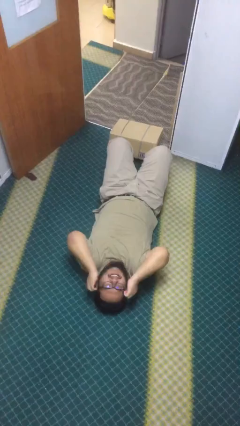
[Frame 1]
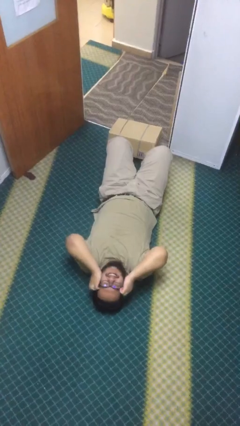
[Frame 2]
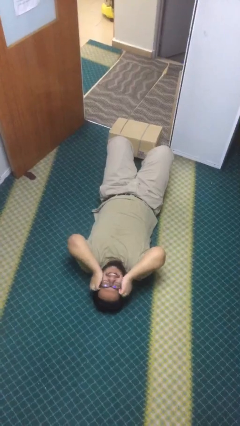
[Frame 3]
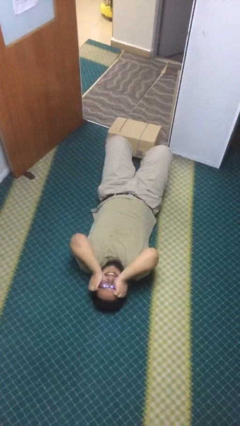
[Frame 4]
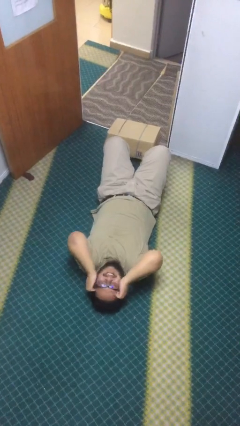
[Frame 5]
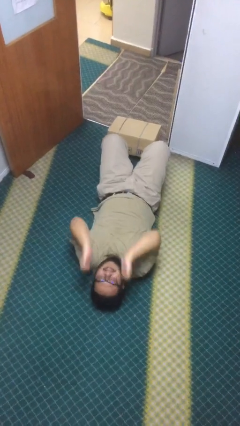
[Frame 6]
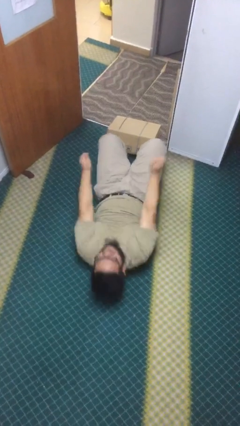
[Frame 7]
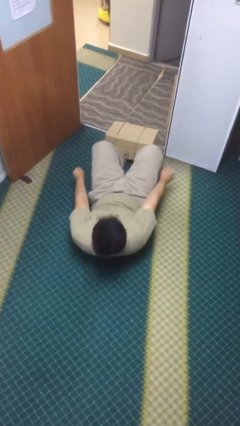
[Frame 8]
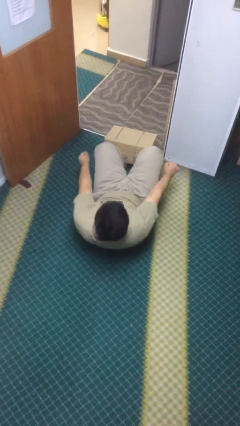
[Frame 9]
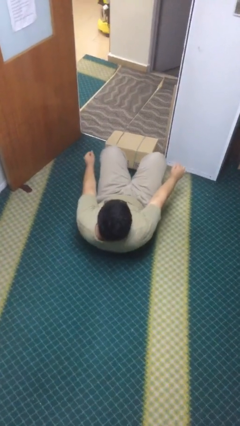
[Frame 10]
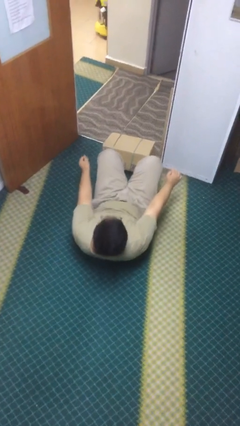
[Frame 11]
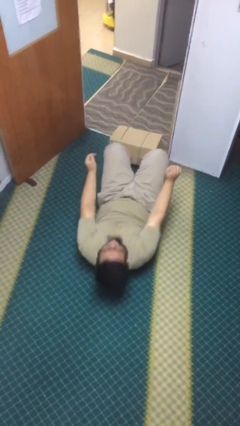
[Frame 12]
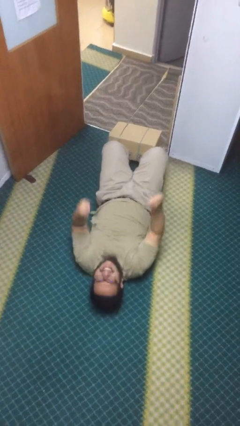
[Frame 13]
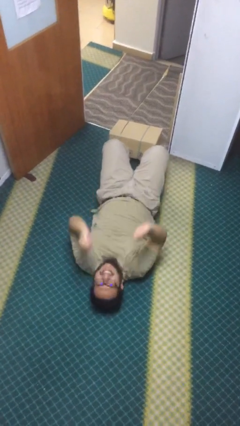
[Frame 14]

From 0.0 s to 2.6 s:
person exercises with situp

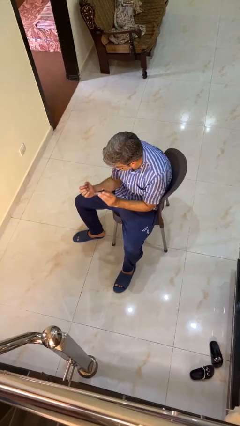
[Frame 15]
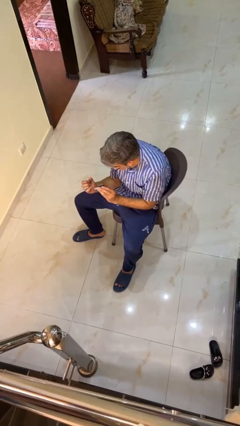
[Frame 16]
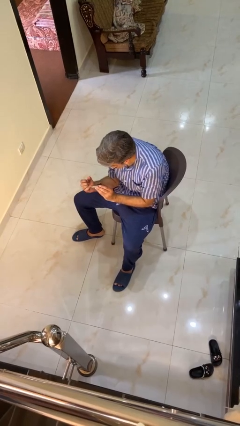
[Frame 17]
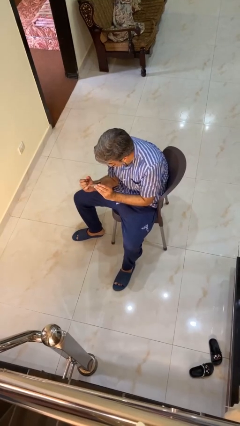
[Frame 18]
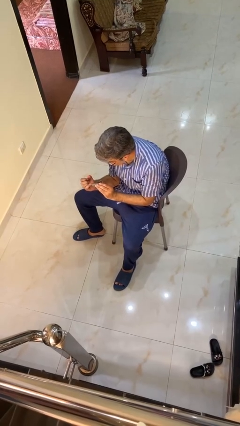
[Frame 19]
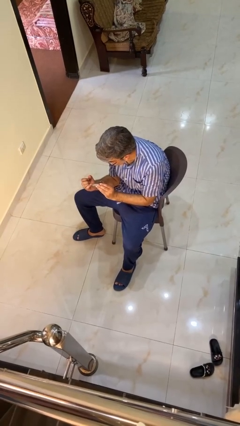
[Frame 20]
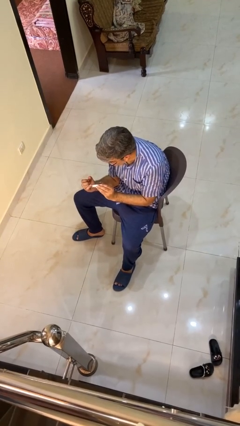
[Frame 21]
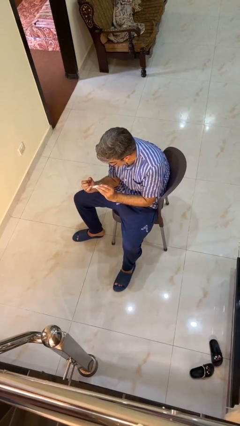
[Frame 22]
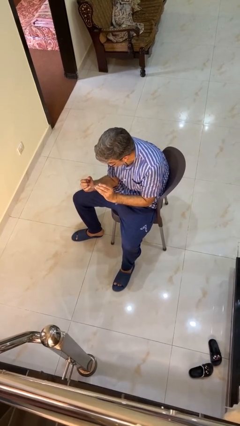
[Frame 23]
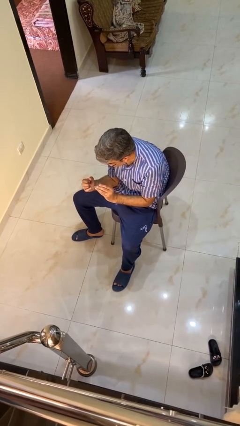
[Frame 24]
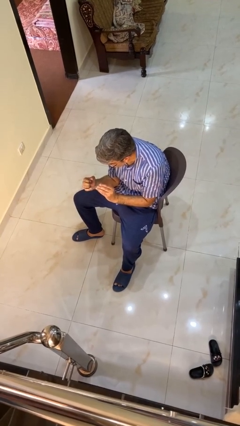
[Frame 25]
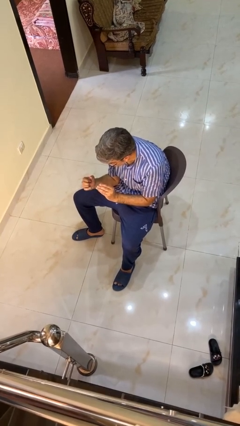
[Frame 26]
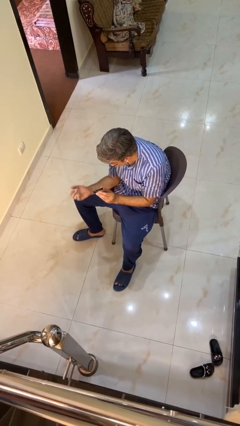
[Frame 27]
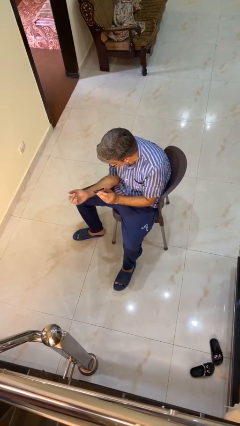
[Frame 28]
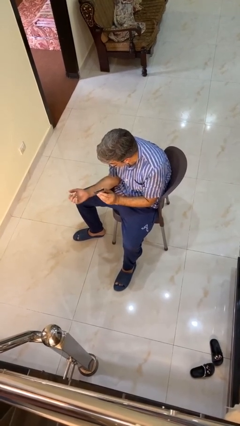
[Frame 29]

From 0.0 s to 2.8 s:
person clips fingernails

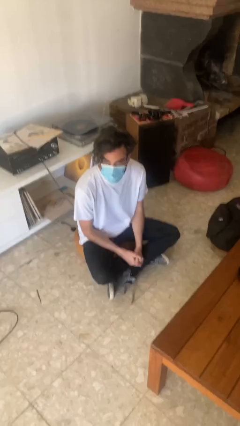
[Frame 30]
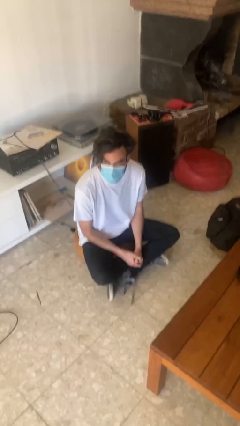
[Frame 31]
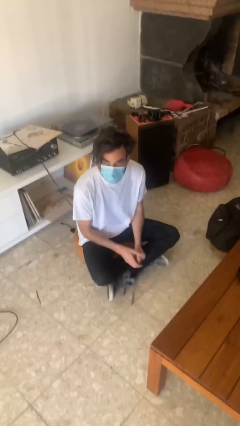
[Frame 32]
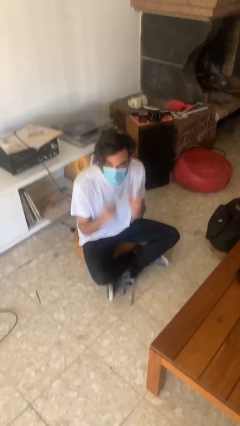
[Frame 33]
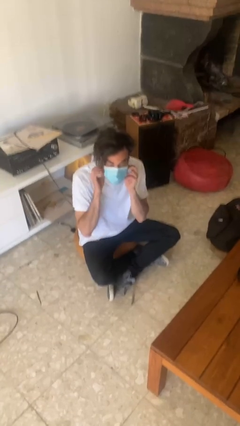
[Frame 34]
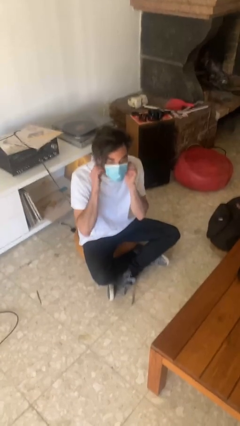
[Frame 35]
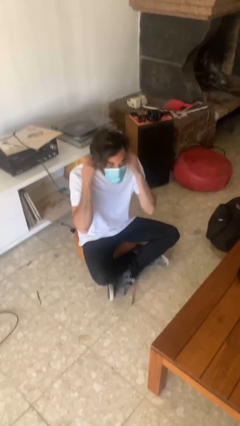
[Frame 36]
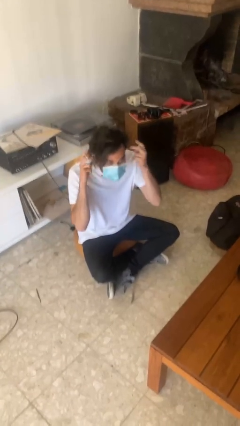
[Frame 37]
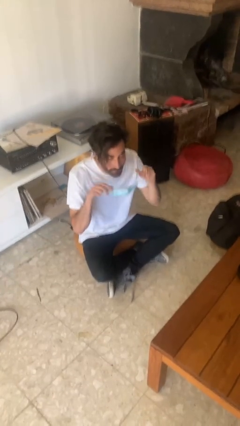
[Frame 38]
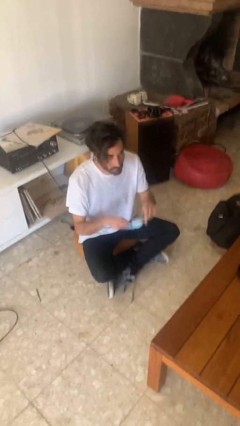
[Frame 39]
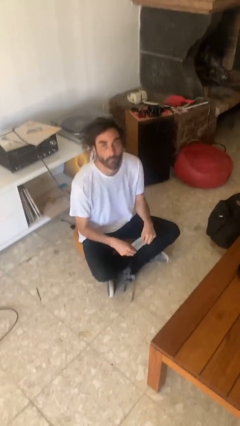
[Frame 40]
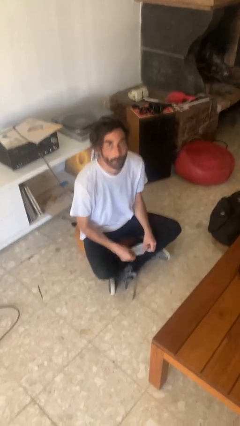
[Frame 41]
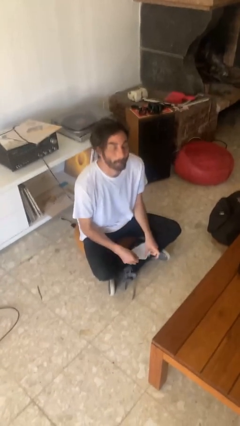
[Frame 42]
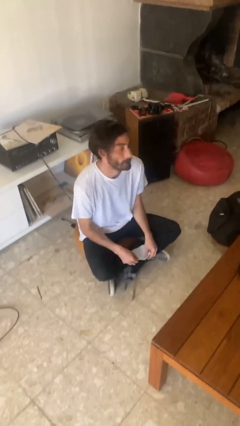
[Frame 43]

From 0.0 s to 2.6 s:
person takes off facemask

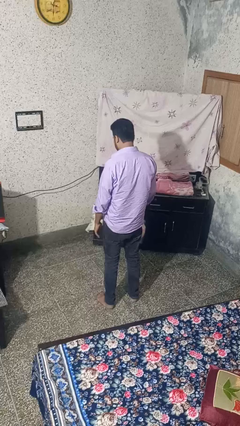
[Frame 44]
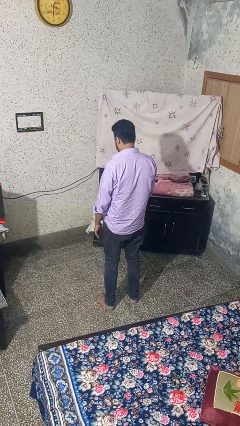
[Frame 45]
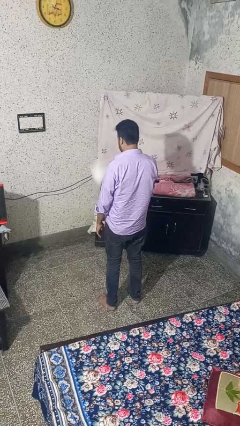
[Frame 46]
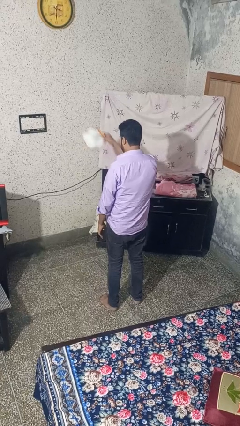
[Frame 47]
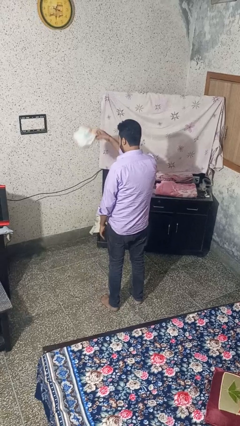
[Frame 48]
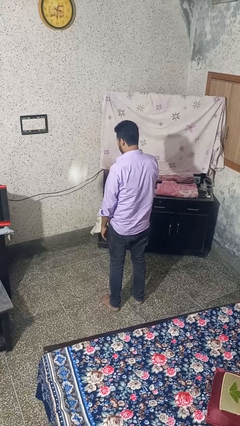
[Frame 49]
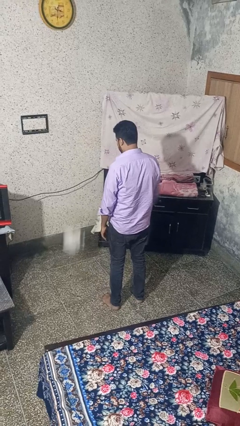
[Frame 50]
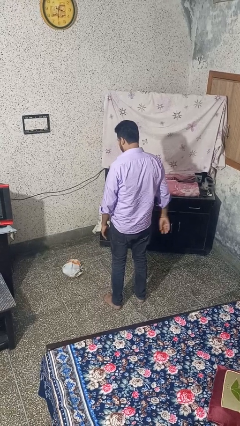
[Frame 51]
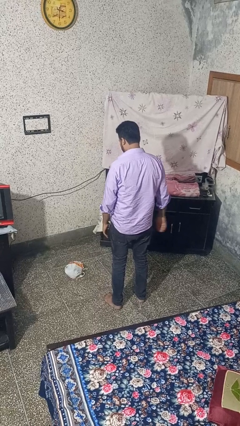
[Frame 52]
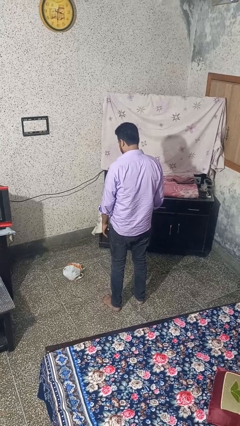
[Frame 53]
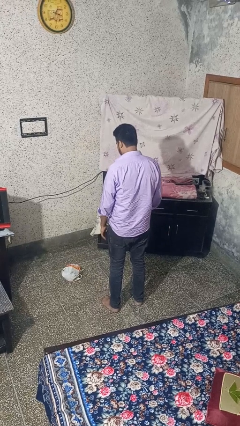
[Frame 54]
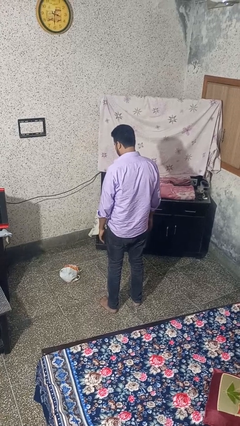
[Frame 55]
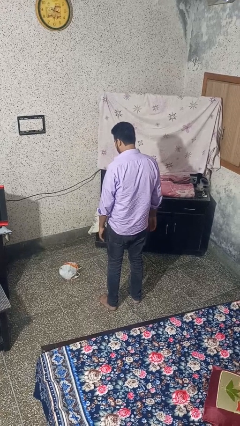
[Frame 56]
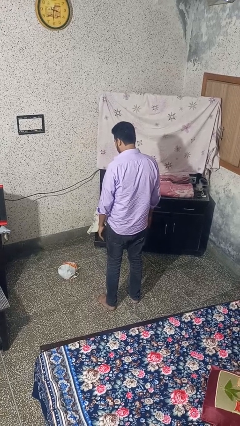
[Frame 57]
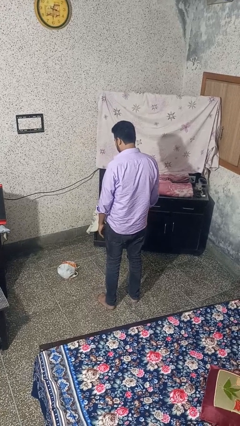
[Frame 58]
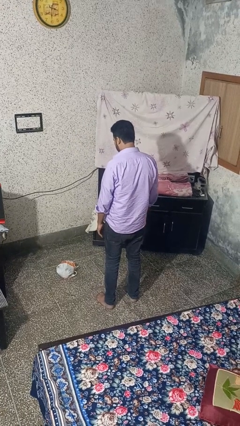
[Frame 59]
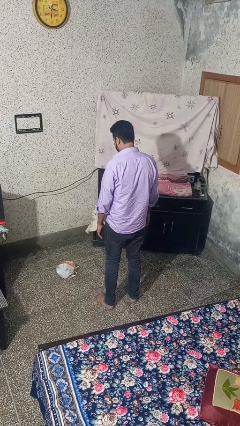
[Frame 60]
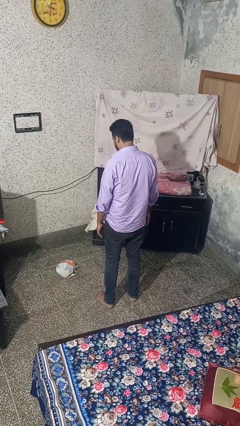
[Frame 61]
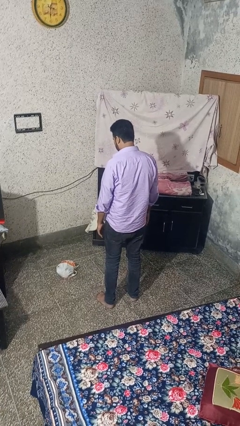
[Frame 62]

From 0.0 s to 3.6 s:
person throws object to ground

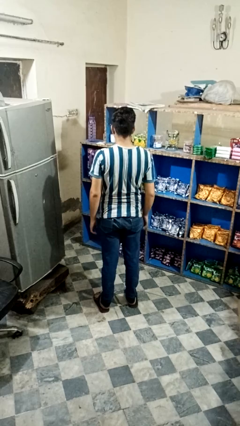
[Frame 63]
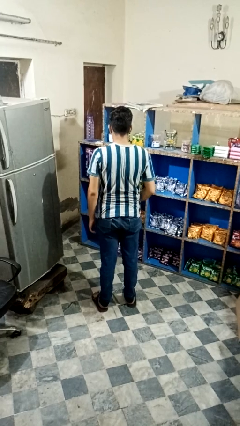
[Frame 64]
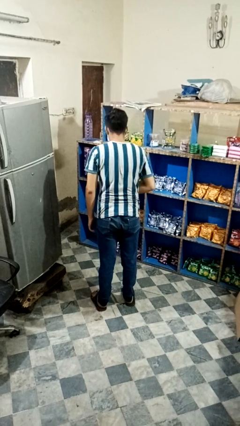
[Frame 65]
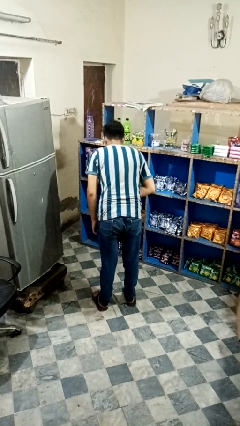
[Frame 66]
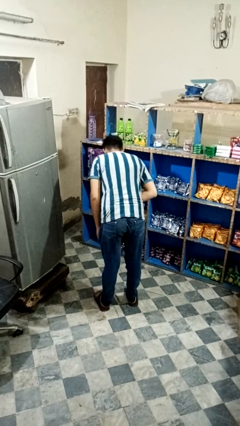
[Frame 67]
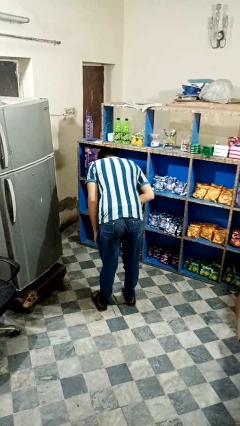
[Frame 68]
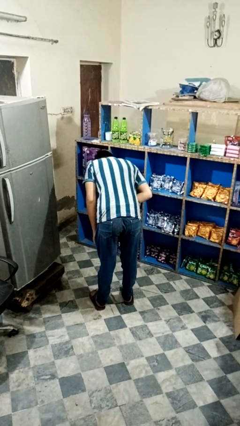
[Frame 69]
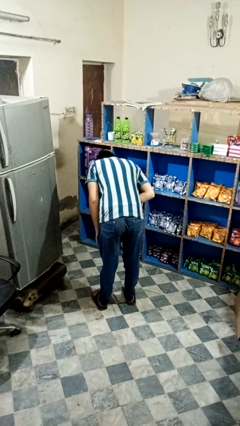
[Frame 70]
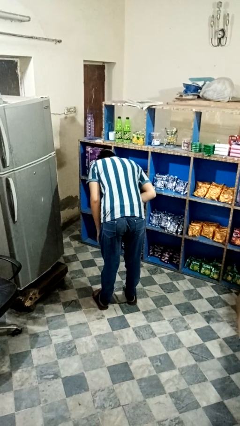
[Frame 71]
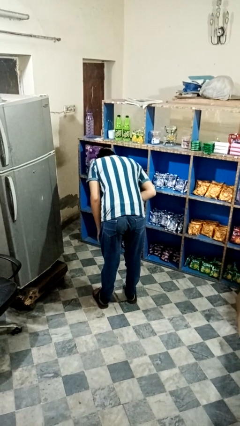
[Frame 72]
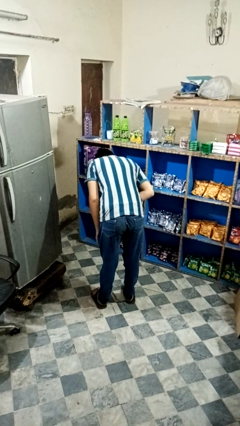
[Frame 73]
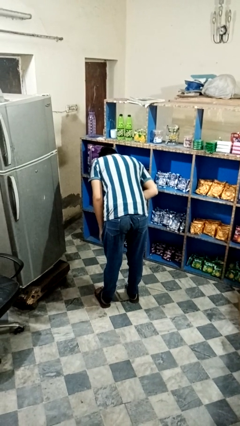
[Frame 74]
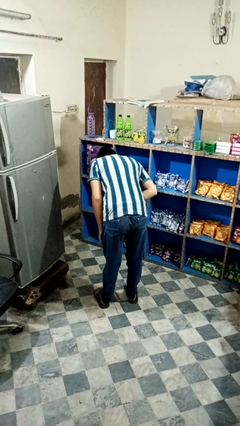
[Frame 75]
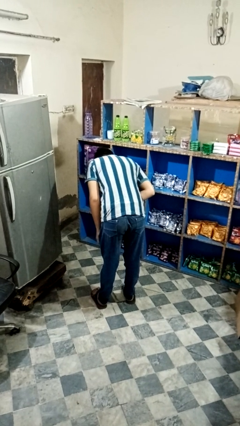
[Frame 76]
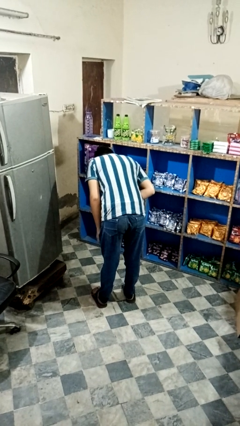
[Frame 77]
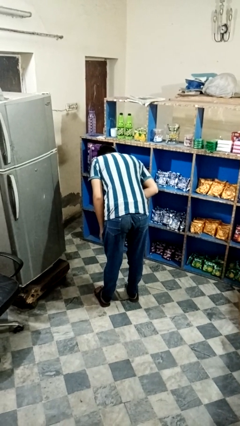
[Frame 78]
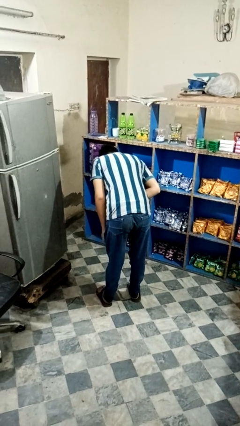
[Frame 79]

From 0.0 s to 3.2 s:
person bows

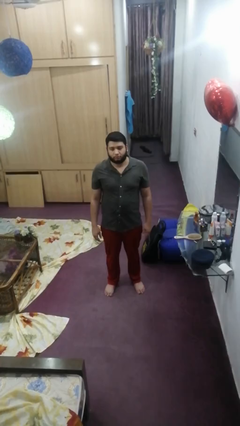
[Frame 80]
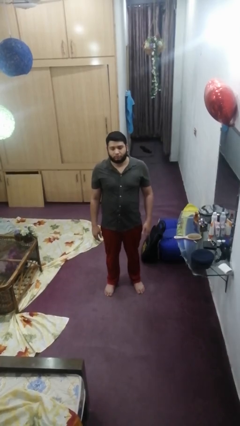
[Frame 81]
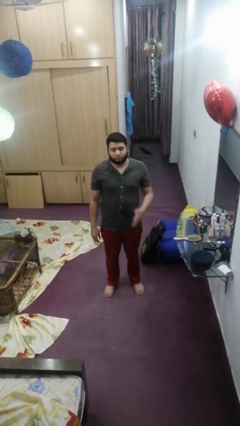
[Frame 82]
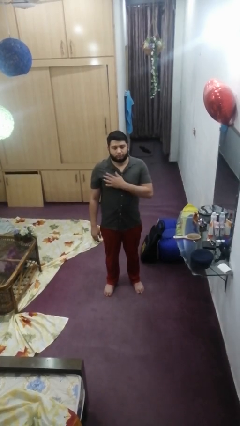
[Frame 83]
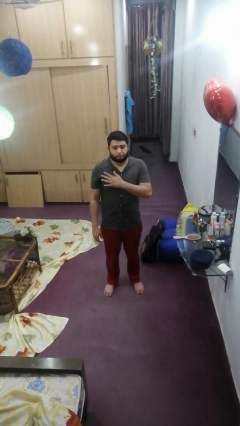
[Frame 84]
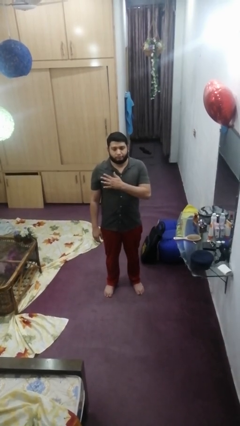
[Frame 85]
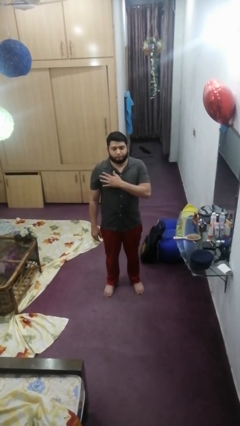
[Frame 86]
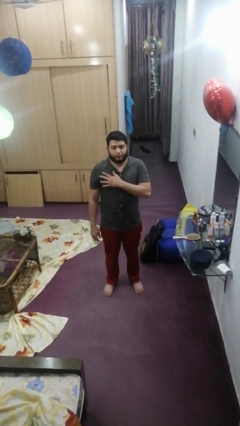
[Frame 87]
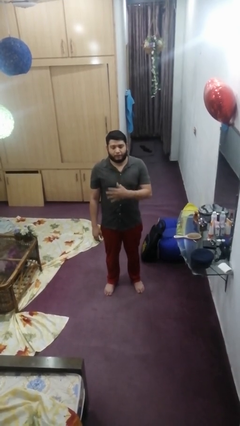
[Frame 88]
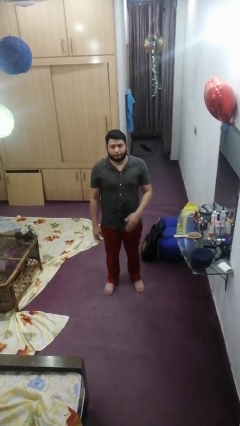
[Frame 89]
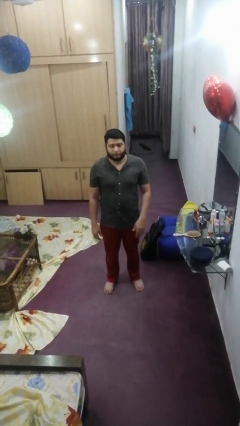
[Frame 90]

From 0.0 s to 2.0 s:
person drums on chest

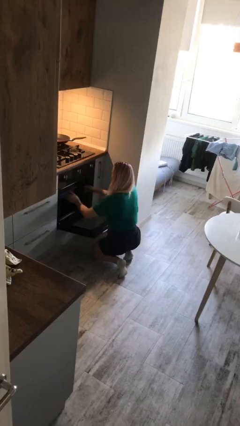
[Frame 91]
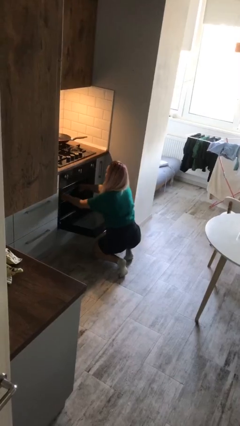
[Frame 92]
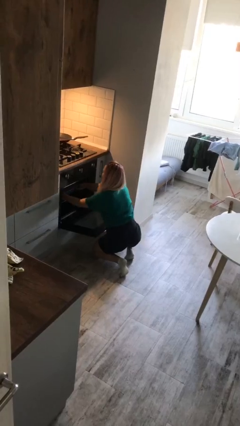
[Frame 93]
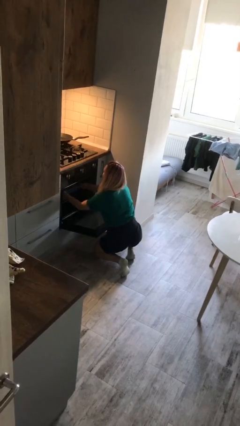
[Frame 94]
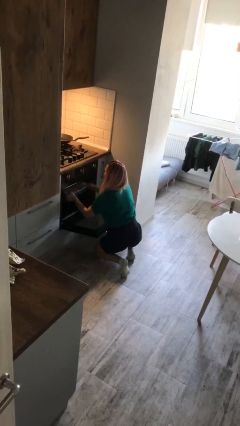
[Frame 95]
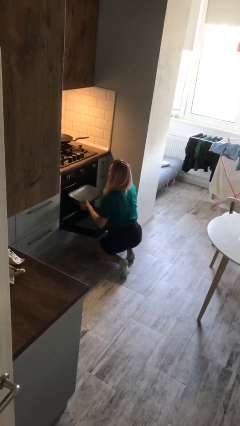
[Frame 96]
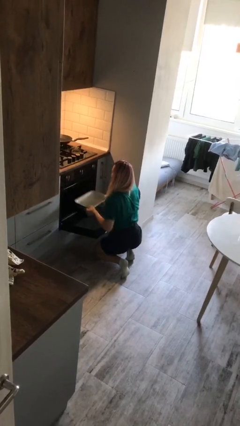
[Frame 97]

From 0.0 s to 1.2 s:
person takes object from oven
